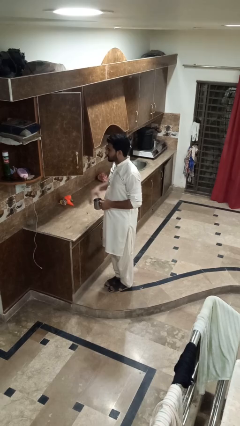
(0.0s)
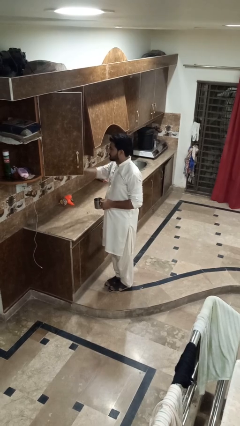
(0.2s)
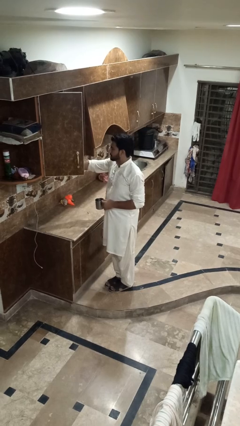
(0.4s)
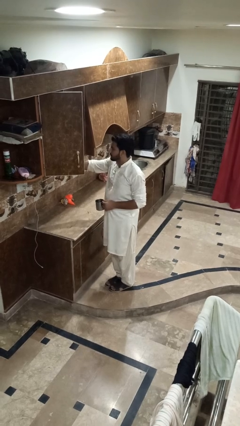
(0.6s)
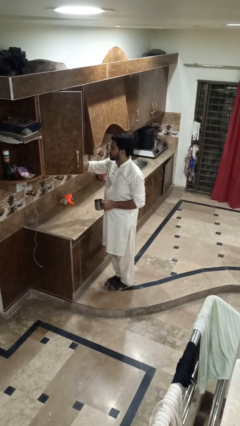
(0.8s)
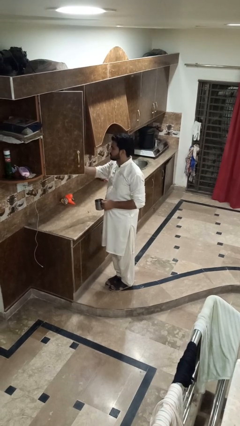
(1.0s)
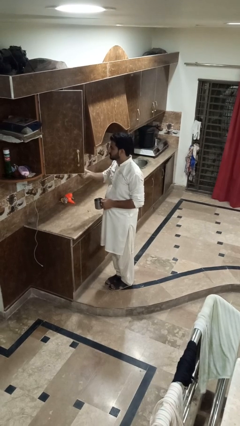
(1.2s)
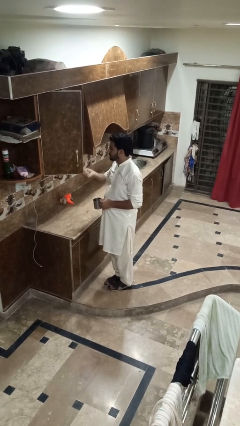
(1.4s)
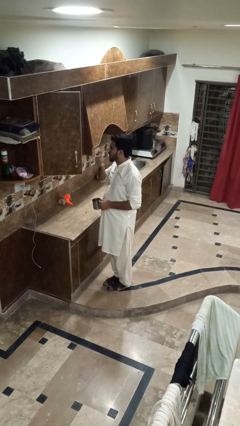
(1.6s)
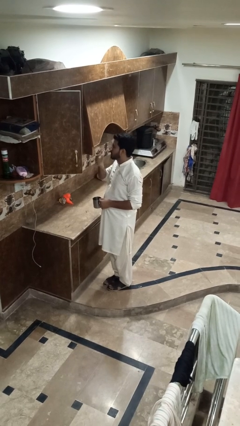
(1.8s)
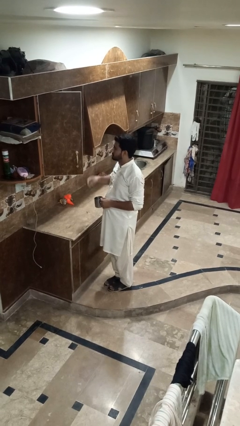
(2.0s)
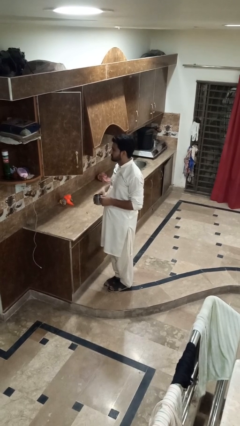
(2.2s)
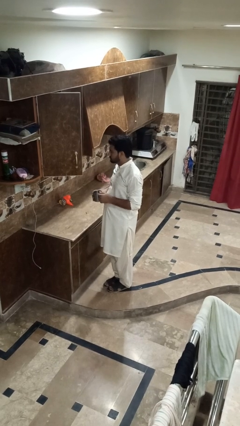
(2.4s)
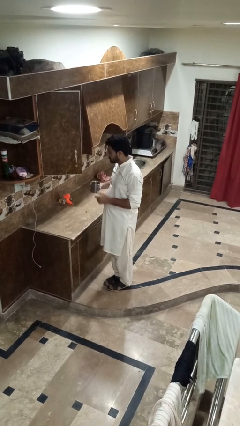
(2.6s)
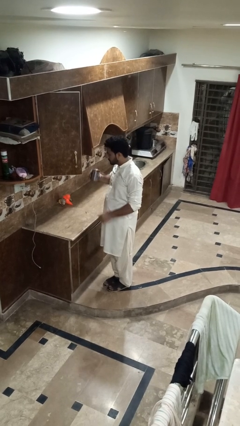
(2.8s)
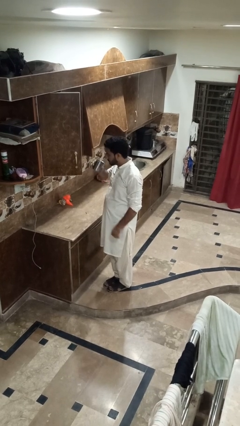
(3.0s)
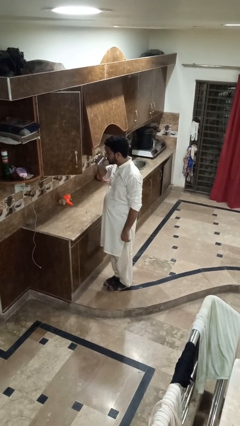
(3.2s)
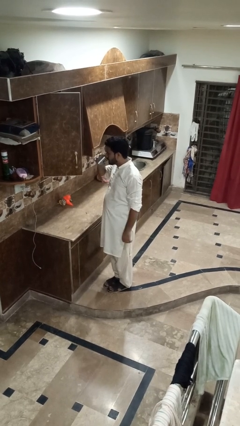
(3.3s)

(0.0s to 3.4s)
person takes medicine pills

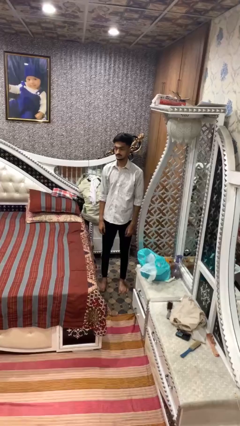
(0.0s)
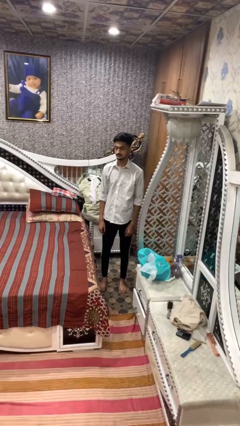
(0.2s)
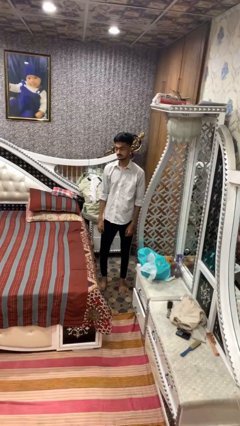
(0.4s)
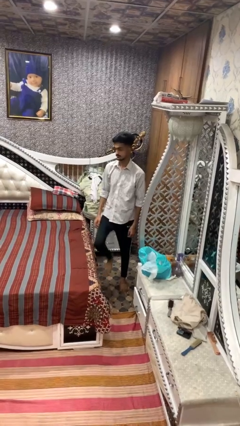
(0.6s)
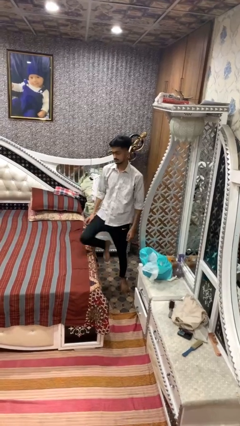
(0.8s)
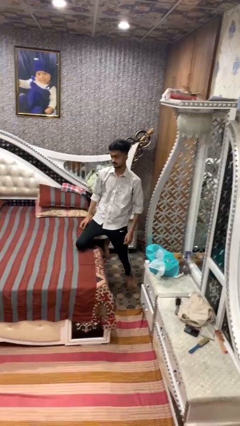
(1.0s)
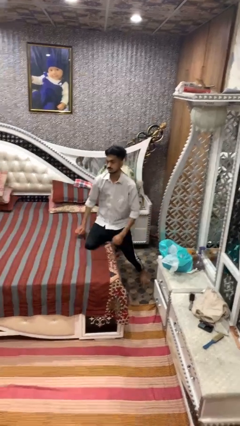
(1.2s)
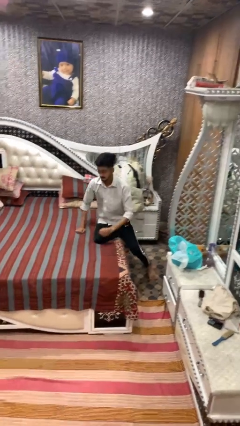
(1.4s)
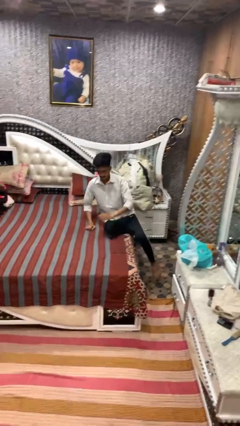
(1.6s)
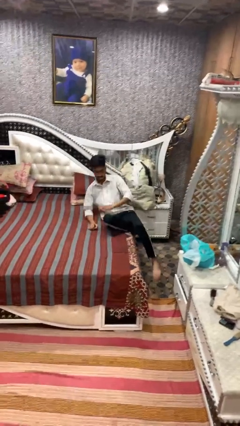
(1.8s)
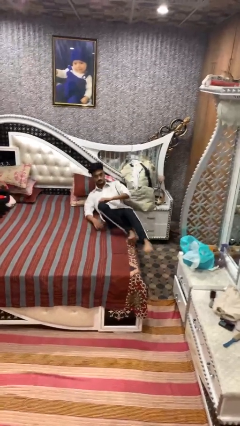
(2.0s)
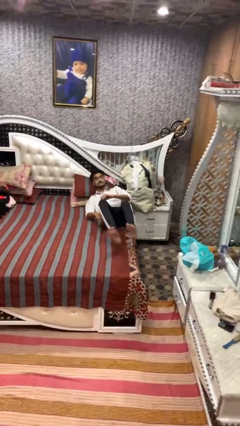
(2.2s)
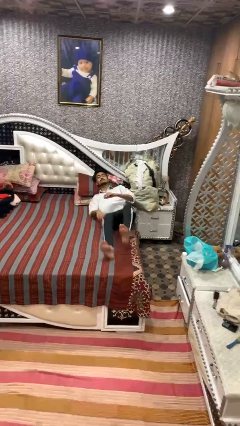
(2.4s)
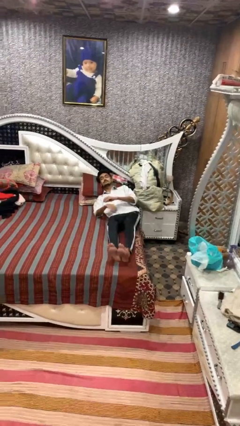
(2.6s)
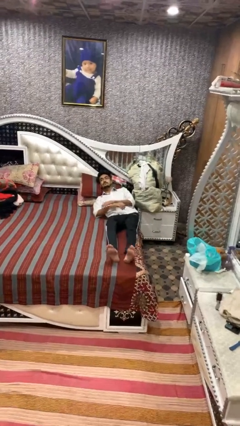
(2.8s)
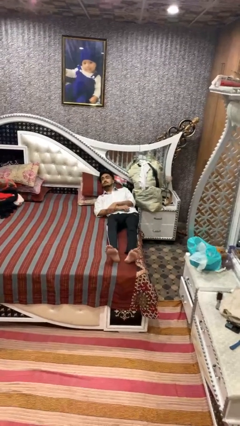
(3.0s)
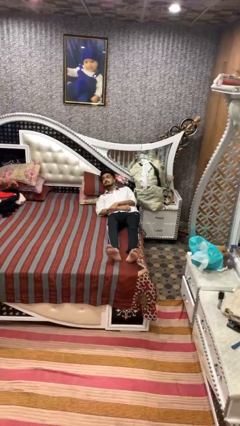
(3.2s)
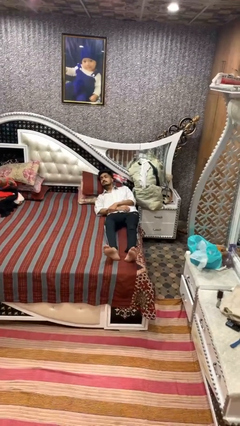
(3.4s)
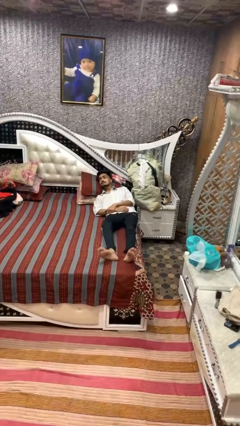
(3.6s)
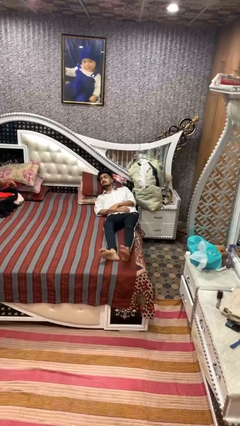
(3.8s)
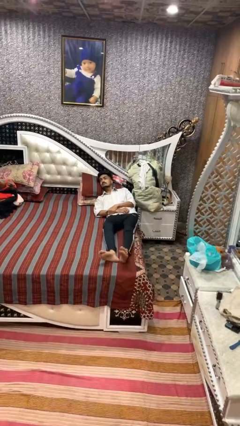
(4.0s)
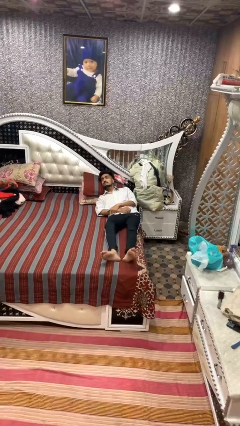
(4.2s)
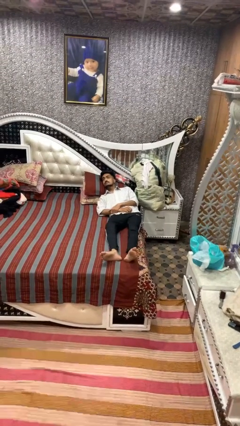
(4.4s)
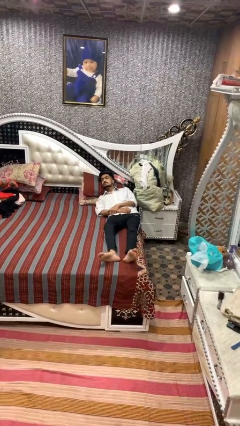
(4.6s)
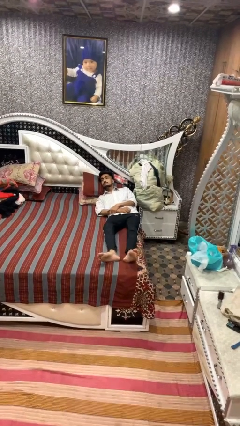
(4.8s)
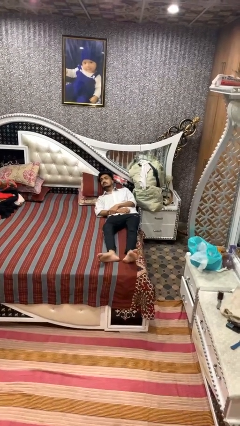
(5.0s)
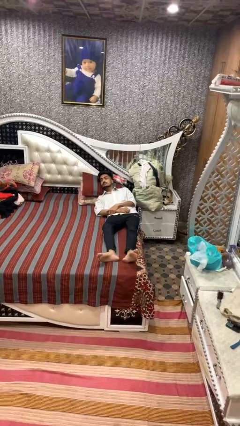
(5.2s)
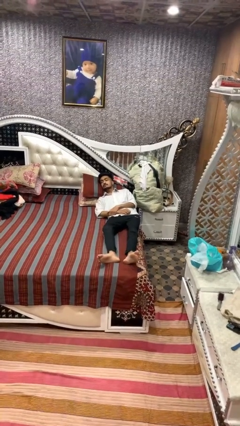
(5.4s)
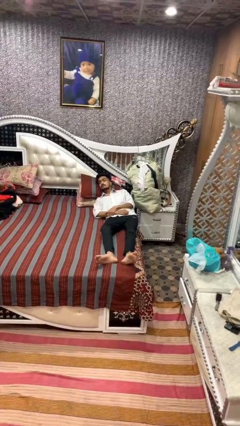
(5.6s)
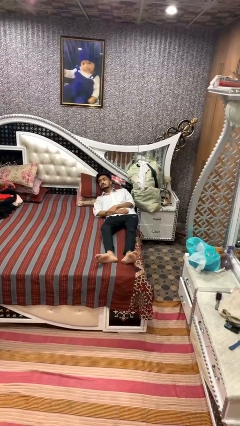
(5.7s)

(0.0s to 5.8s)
person lies down on bed

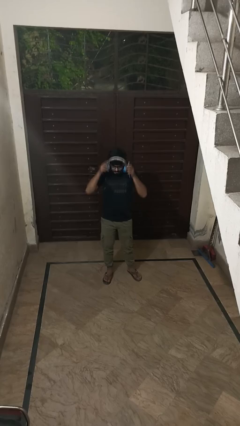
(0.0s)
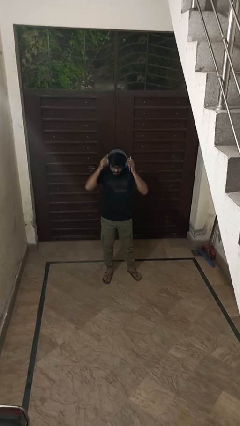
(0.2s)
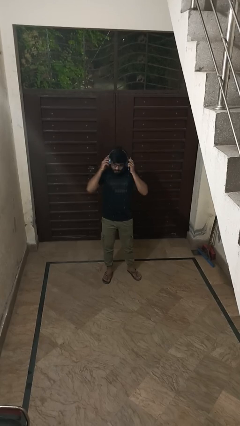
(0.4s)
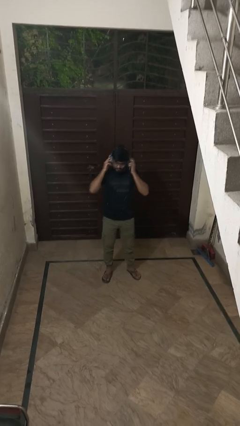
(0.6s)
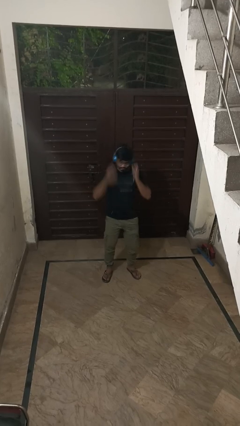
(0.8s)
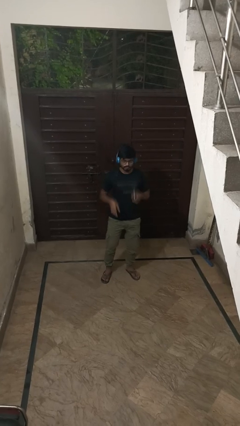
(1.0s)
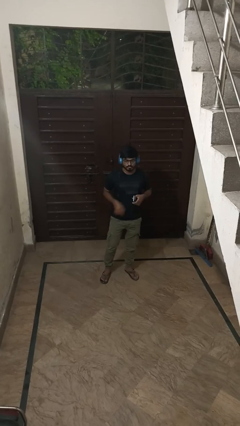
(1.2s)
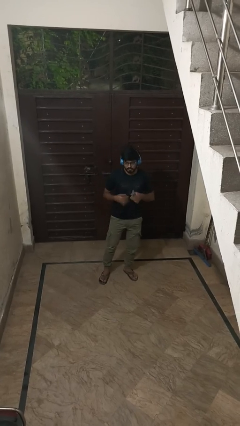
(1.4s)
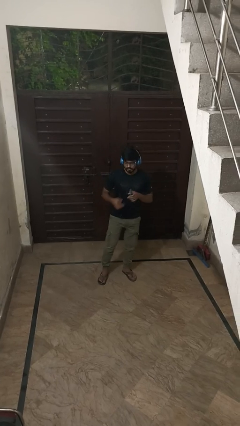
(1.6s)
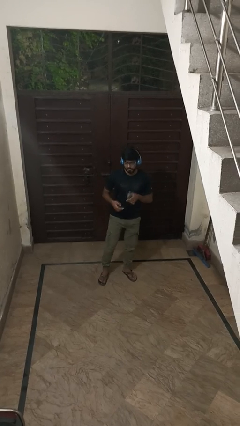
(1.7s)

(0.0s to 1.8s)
person puts on headphones

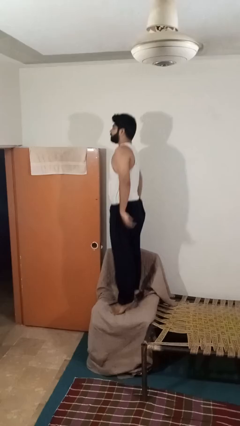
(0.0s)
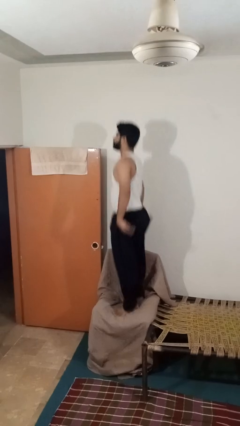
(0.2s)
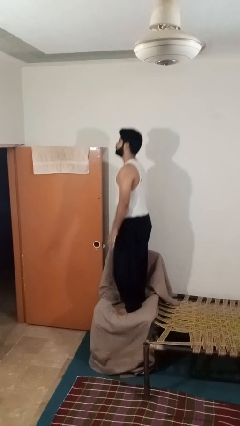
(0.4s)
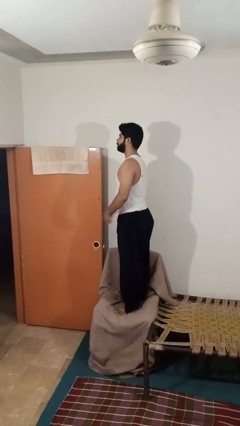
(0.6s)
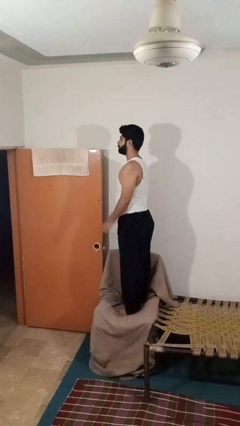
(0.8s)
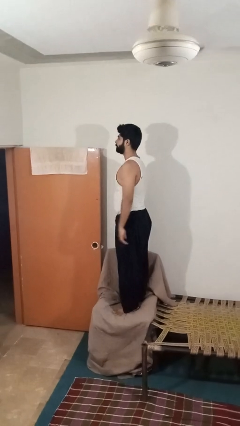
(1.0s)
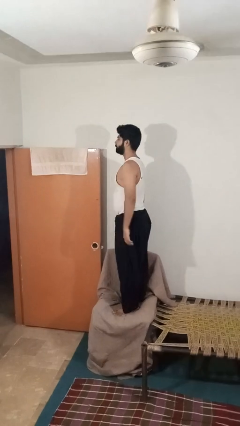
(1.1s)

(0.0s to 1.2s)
person jumps on couch

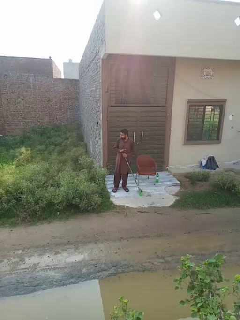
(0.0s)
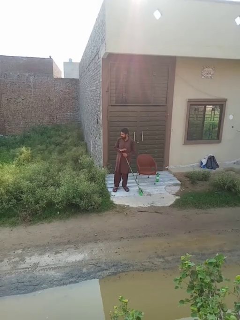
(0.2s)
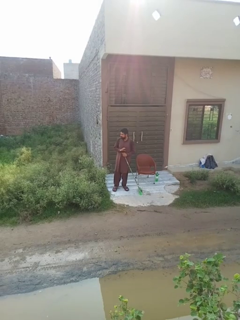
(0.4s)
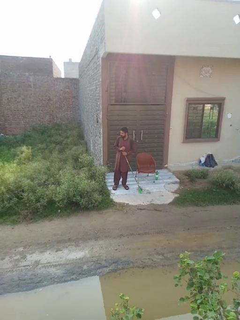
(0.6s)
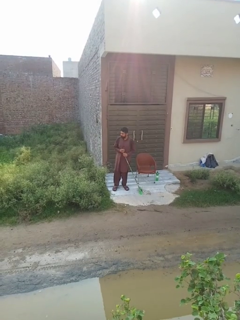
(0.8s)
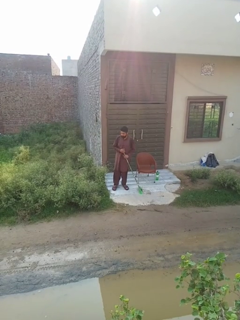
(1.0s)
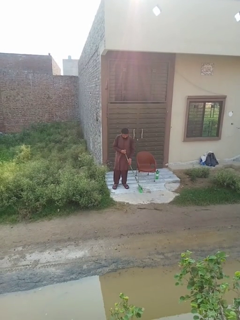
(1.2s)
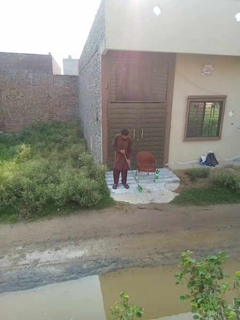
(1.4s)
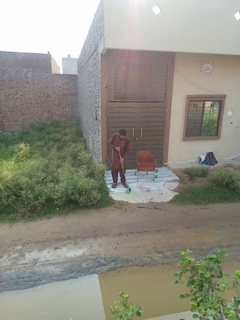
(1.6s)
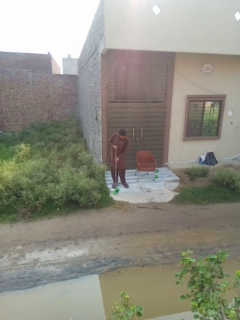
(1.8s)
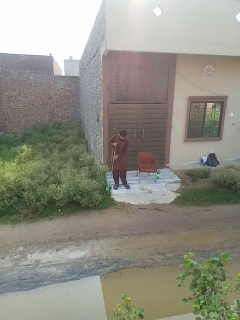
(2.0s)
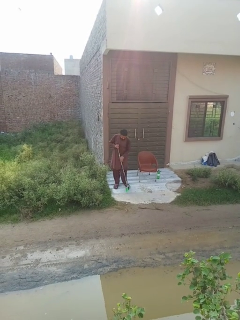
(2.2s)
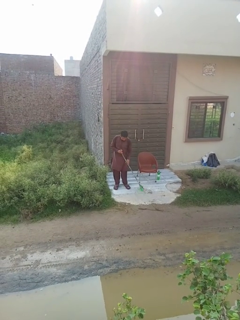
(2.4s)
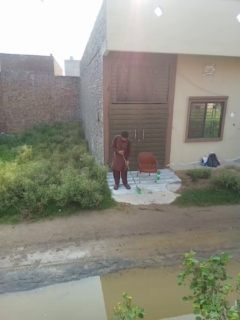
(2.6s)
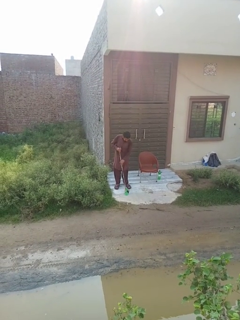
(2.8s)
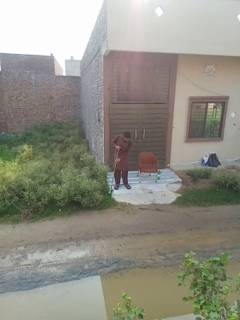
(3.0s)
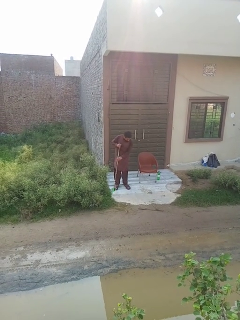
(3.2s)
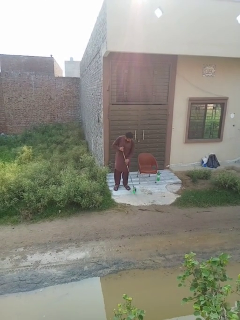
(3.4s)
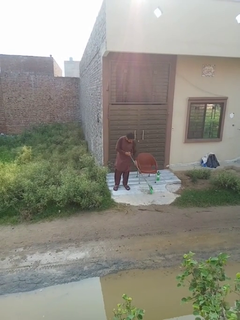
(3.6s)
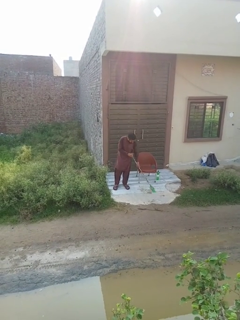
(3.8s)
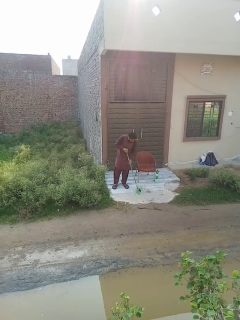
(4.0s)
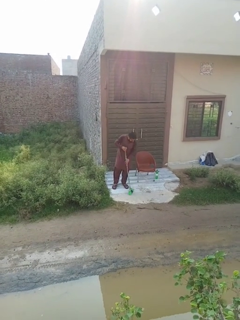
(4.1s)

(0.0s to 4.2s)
person sweeps floor

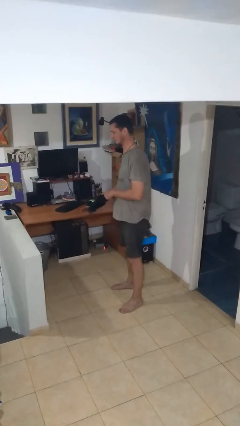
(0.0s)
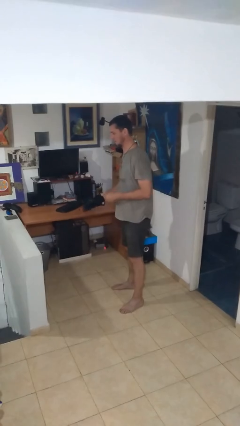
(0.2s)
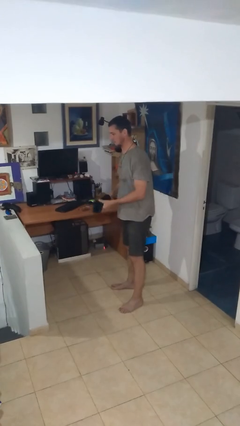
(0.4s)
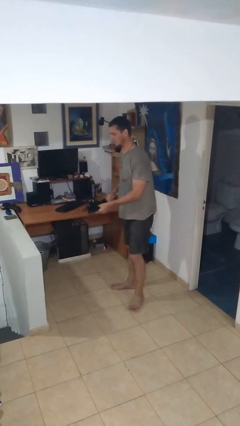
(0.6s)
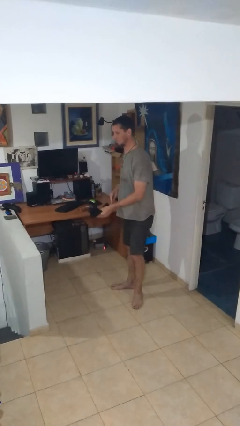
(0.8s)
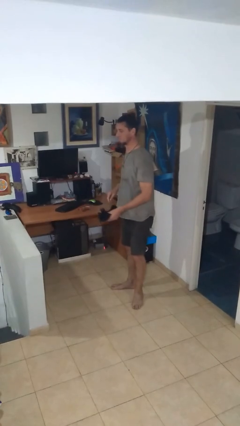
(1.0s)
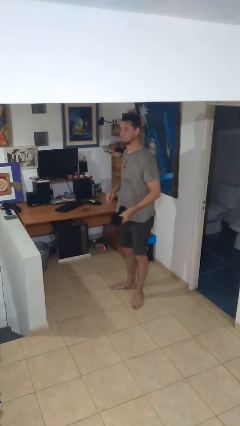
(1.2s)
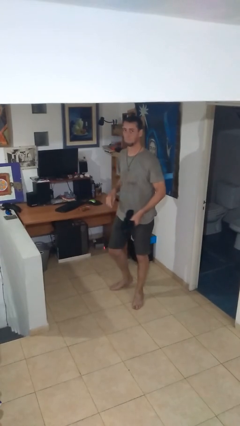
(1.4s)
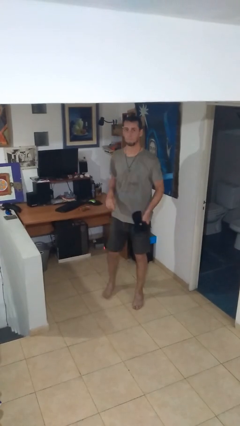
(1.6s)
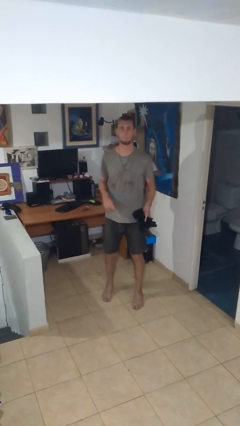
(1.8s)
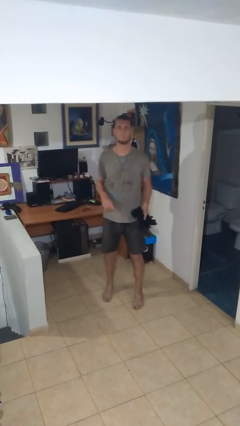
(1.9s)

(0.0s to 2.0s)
person takes off gloves
